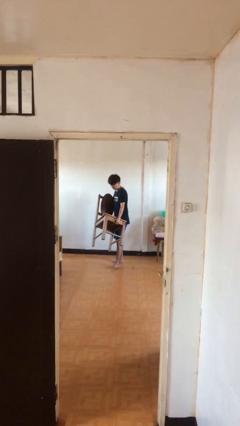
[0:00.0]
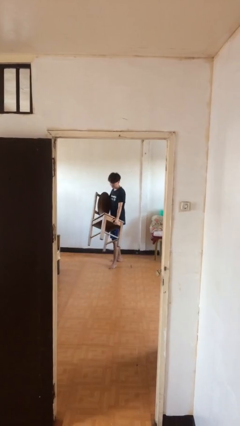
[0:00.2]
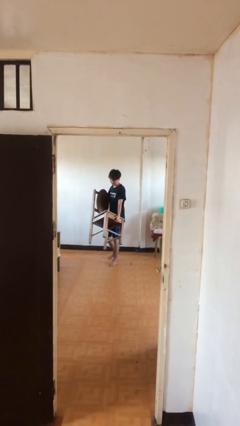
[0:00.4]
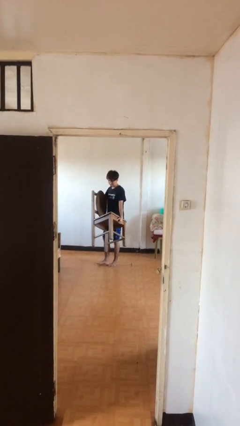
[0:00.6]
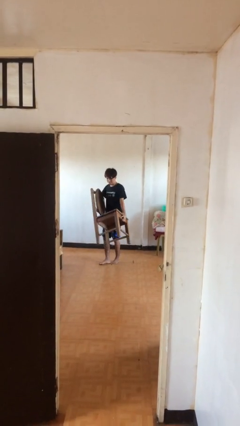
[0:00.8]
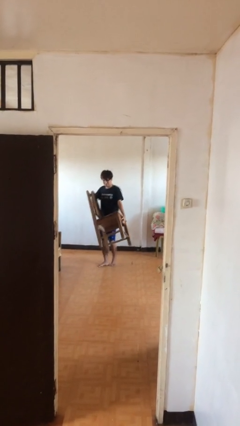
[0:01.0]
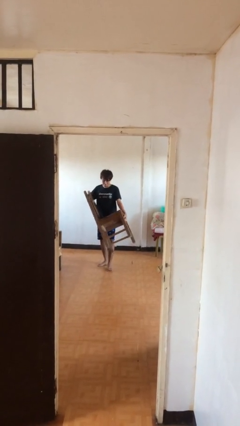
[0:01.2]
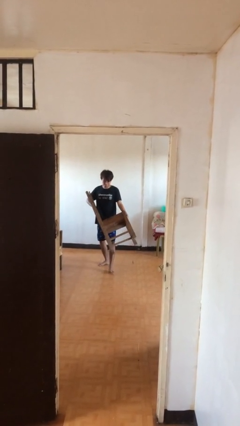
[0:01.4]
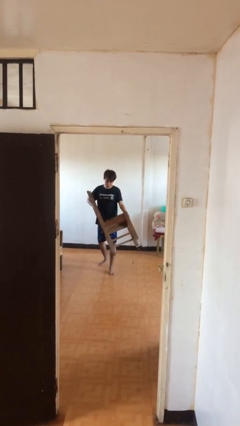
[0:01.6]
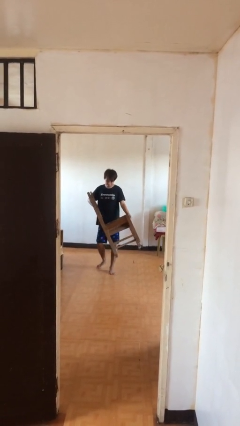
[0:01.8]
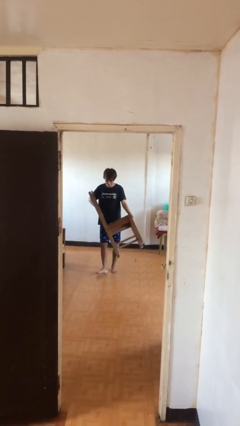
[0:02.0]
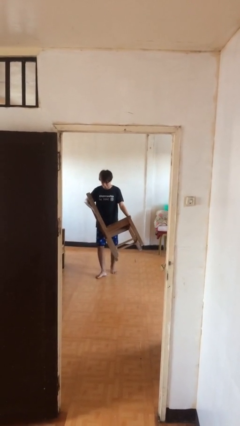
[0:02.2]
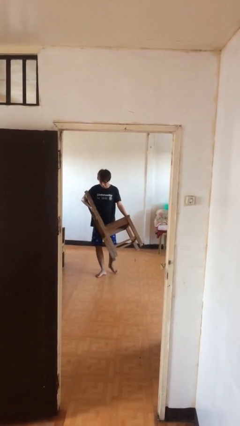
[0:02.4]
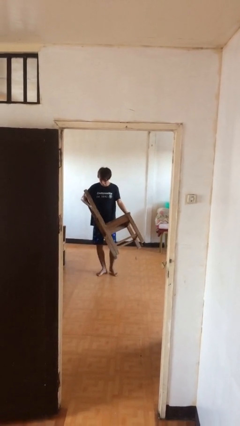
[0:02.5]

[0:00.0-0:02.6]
person carries heavy object

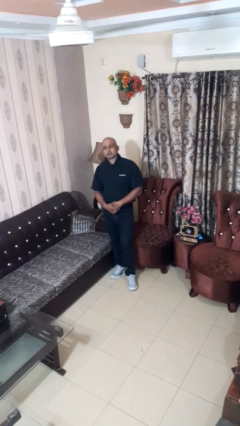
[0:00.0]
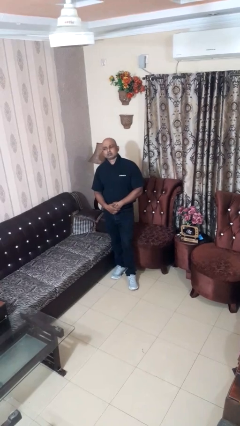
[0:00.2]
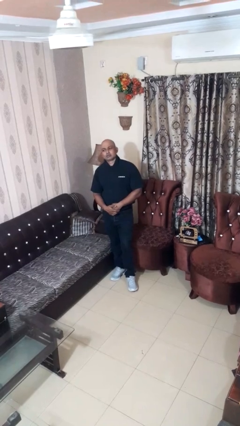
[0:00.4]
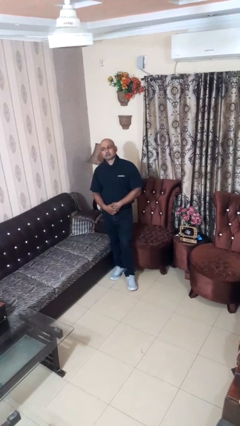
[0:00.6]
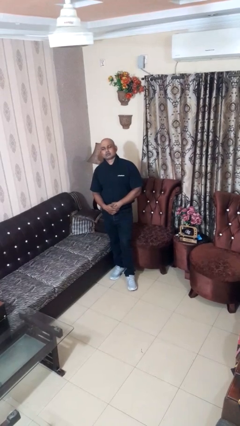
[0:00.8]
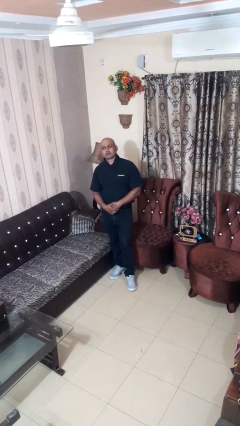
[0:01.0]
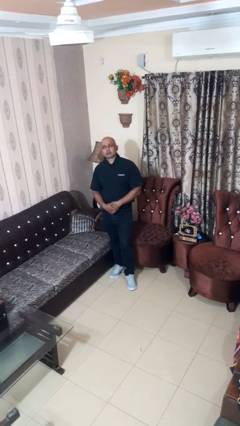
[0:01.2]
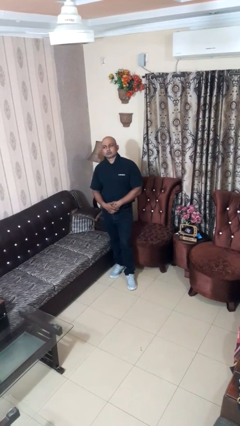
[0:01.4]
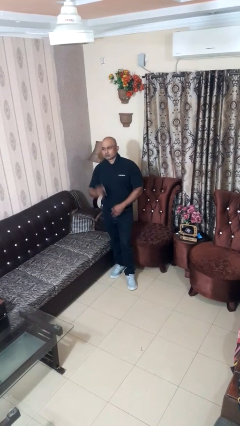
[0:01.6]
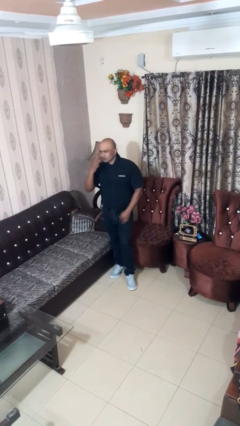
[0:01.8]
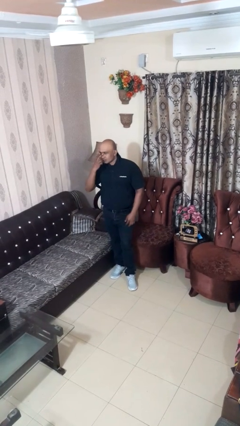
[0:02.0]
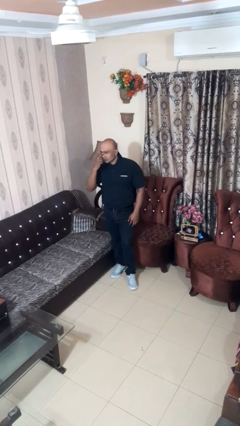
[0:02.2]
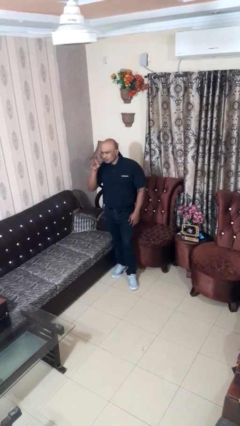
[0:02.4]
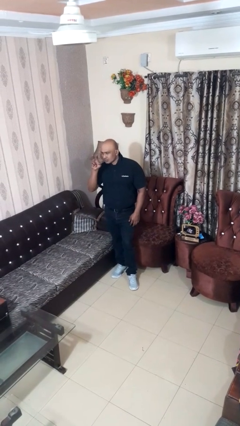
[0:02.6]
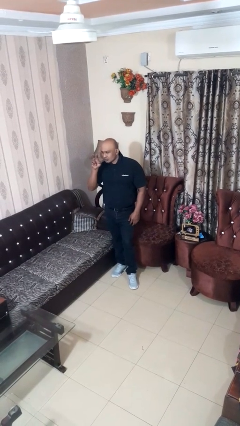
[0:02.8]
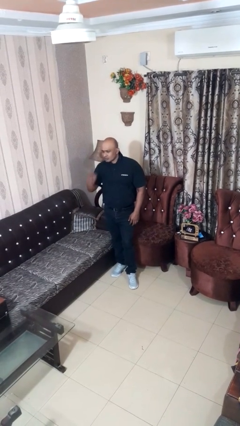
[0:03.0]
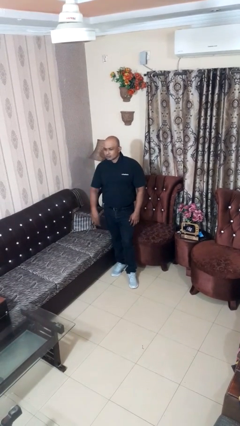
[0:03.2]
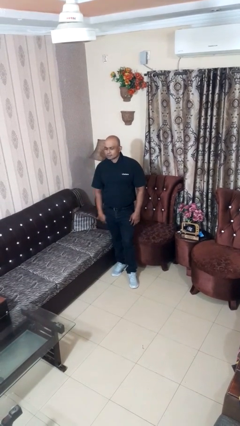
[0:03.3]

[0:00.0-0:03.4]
person gestures watch closely

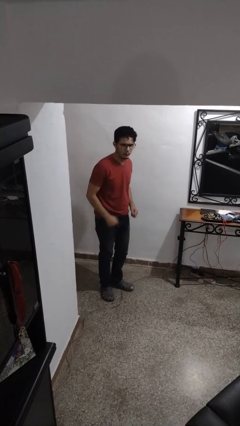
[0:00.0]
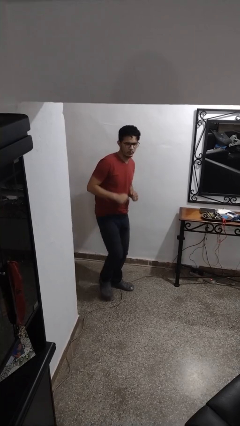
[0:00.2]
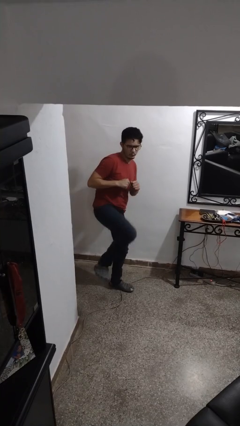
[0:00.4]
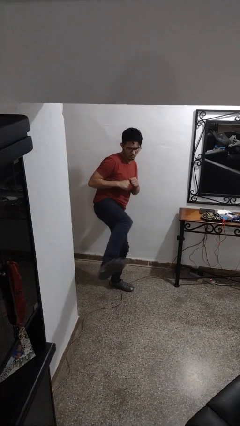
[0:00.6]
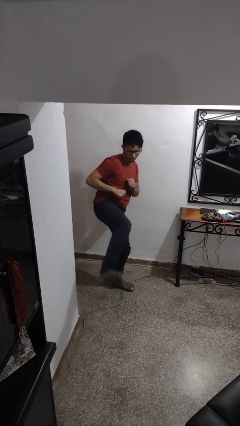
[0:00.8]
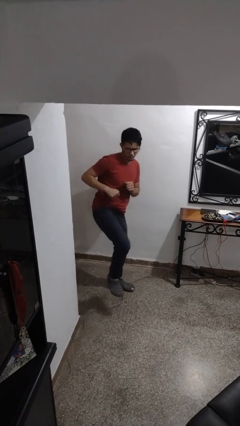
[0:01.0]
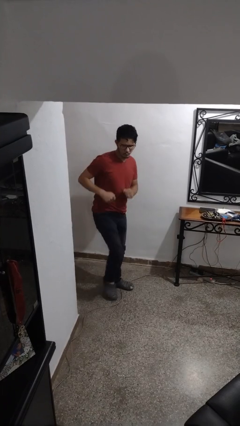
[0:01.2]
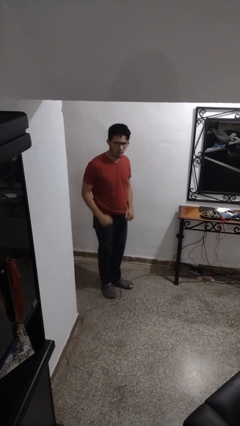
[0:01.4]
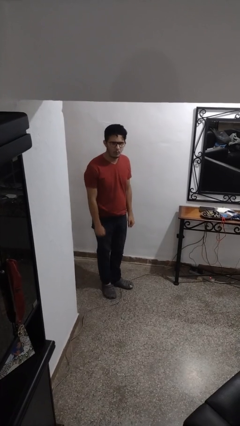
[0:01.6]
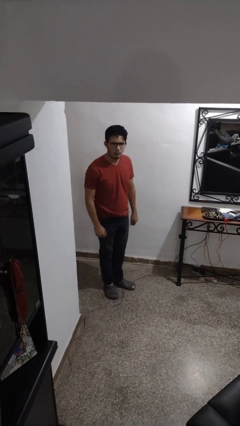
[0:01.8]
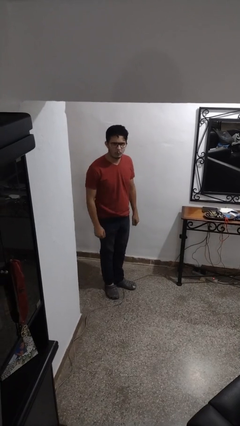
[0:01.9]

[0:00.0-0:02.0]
person karate kicks

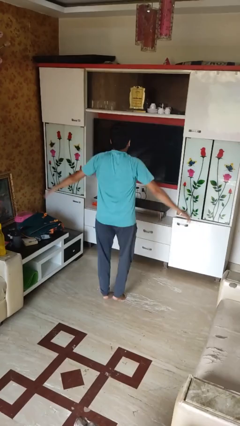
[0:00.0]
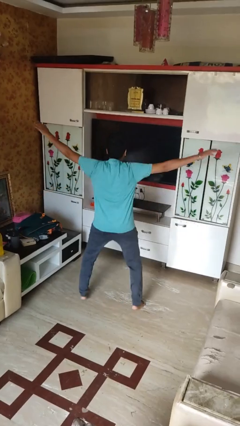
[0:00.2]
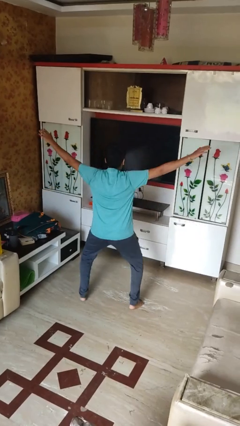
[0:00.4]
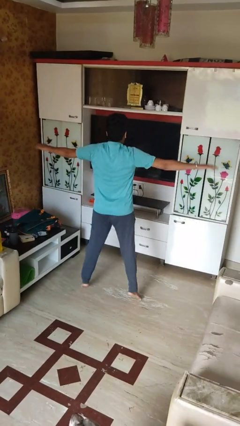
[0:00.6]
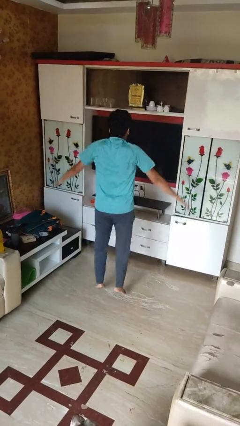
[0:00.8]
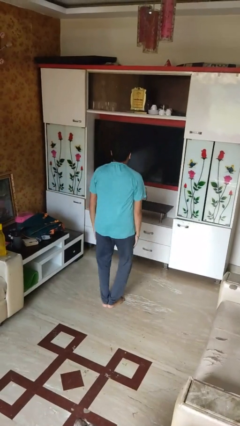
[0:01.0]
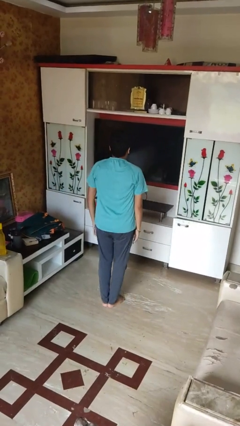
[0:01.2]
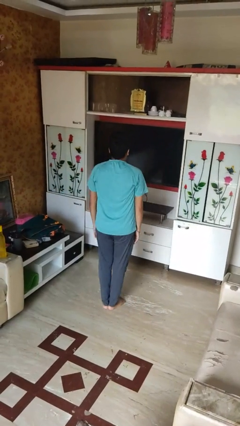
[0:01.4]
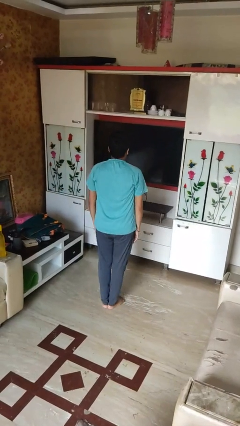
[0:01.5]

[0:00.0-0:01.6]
person exercises with jumping jacks

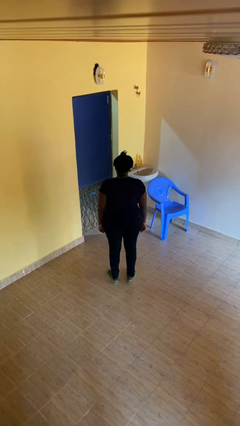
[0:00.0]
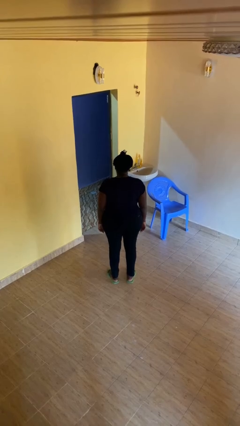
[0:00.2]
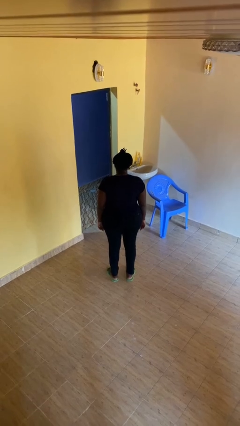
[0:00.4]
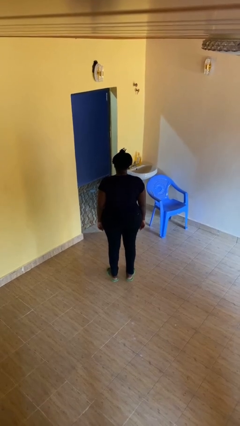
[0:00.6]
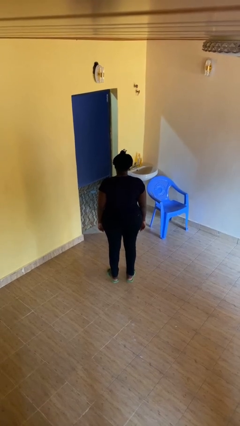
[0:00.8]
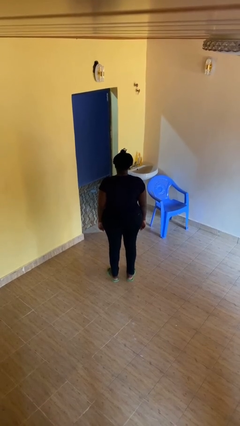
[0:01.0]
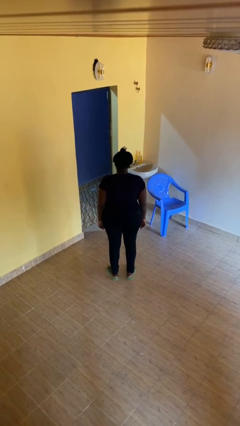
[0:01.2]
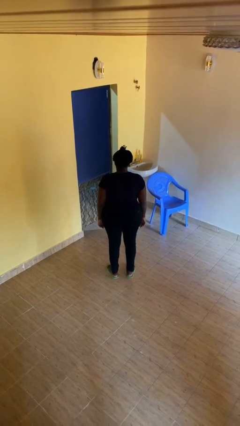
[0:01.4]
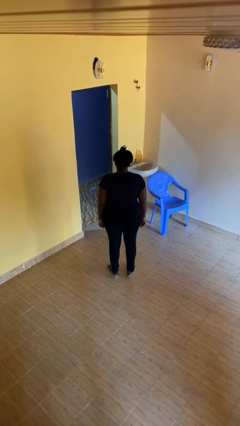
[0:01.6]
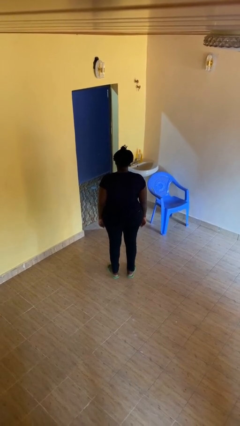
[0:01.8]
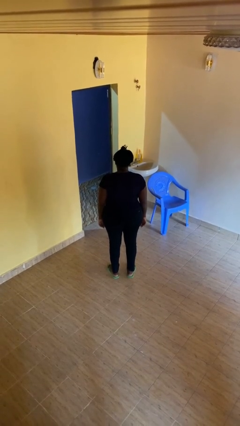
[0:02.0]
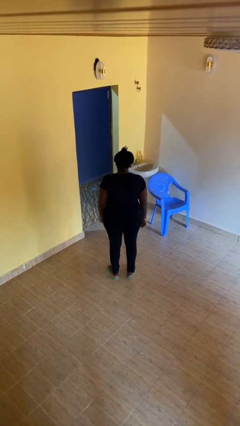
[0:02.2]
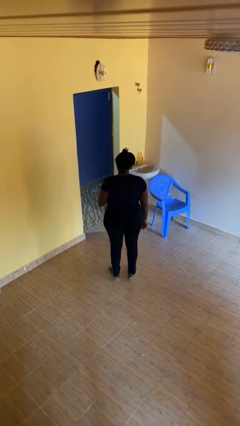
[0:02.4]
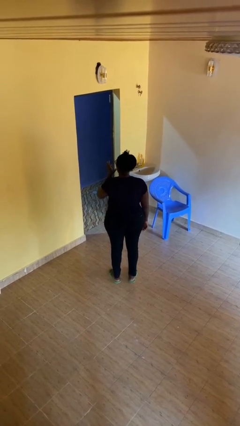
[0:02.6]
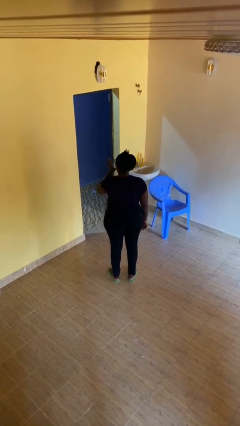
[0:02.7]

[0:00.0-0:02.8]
person licks fingers

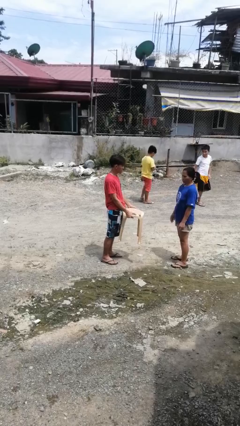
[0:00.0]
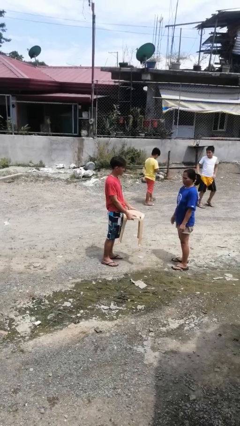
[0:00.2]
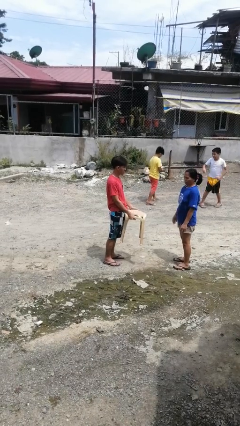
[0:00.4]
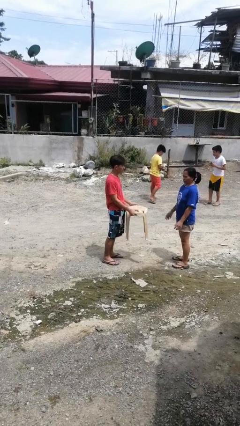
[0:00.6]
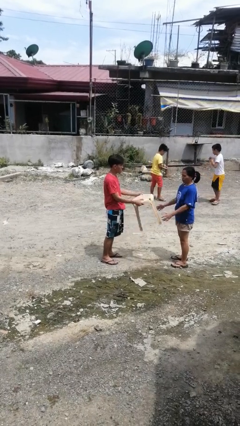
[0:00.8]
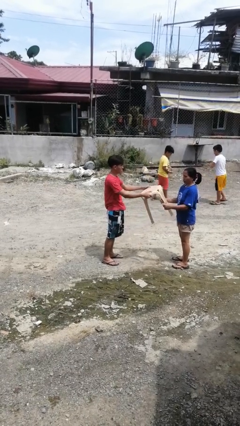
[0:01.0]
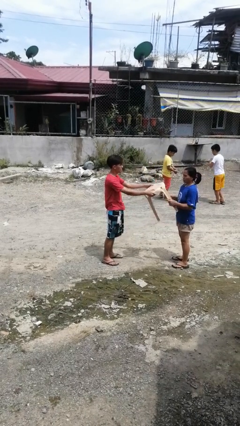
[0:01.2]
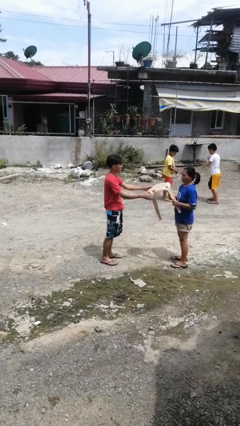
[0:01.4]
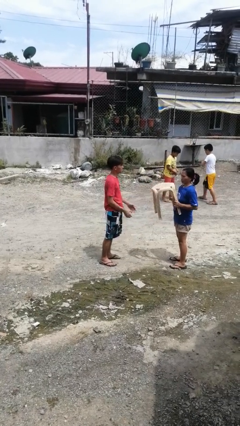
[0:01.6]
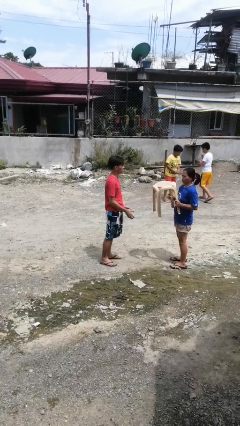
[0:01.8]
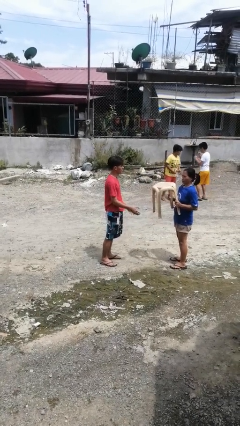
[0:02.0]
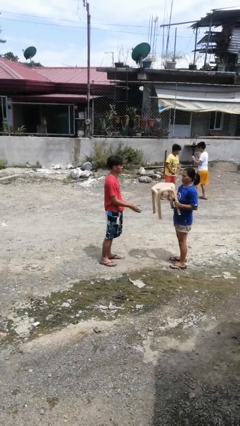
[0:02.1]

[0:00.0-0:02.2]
person transfers object to person

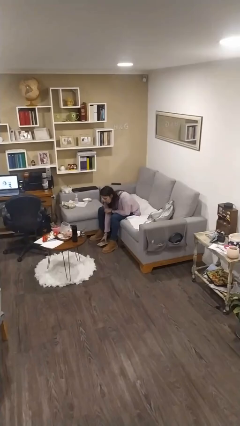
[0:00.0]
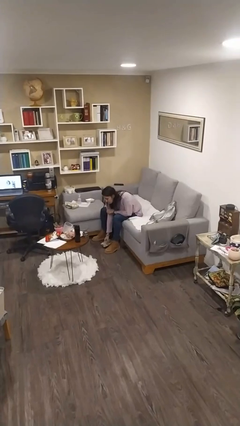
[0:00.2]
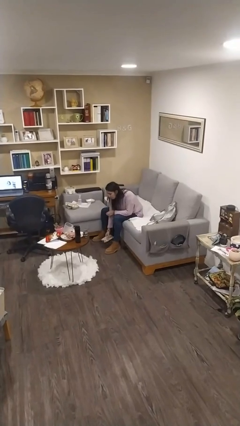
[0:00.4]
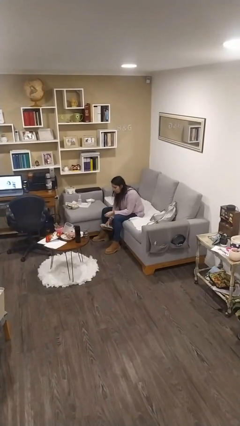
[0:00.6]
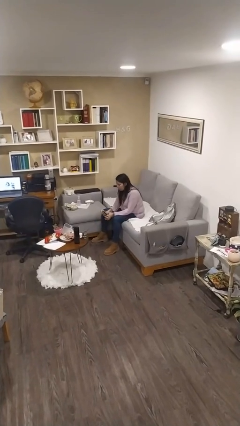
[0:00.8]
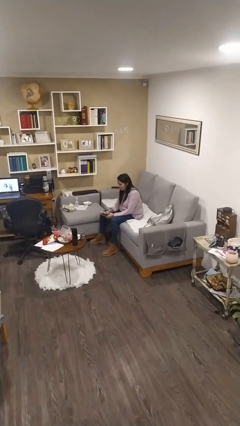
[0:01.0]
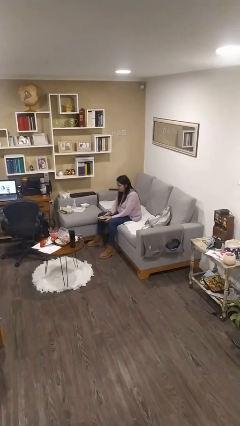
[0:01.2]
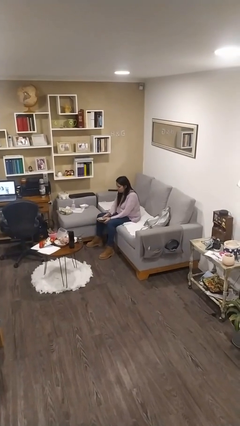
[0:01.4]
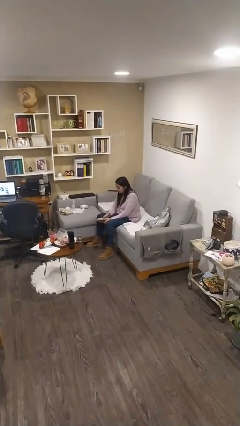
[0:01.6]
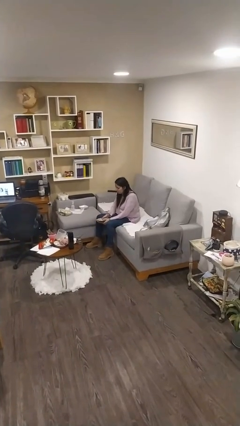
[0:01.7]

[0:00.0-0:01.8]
person picks up object from floor

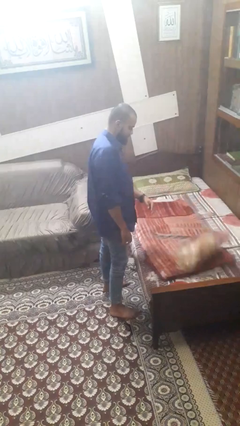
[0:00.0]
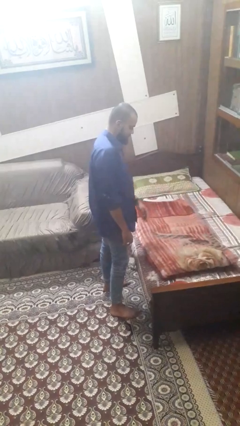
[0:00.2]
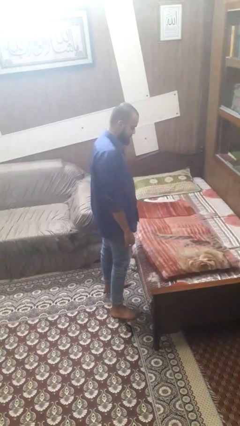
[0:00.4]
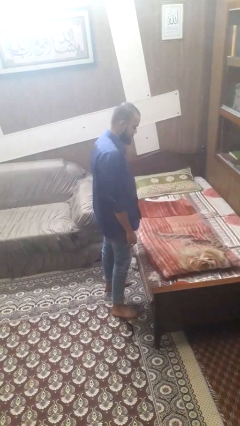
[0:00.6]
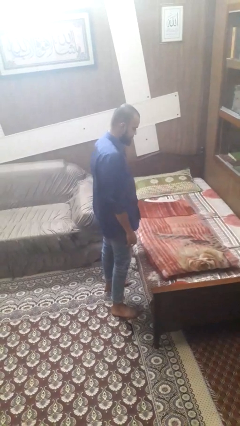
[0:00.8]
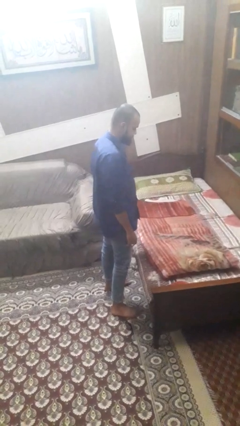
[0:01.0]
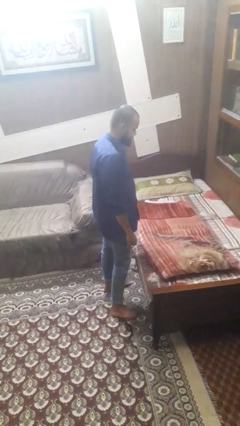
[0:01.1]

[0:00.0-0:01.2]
person unfolds blanket
